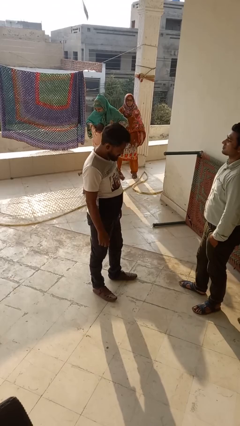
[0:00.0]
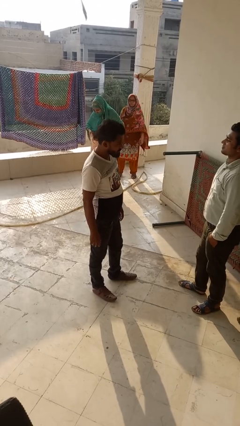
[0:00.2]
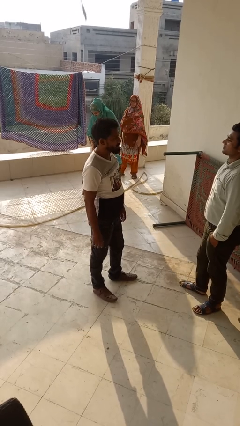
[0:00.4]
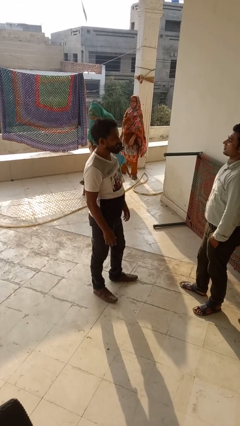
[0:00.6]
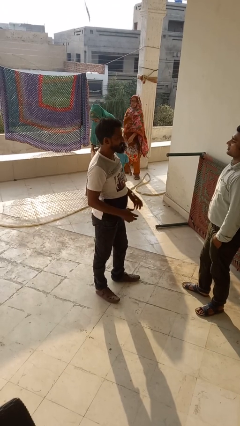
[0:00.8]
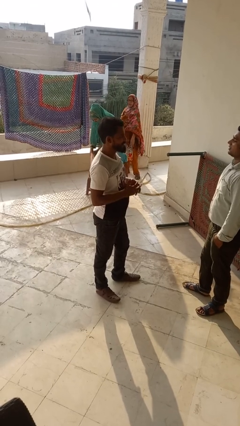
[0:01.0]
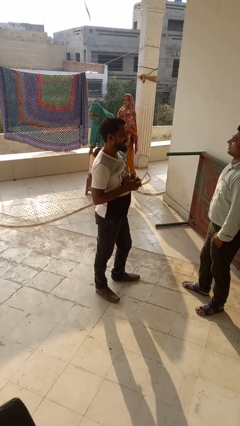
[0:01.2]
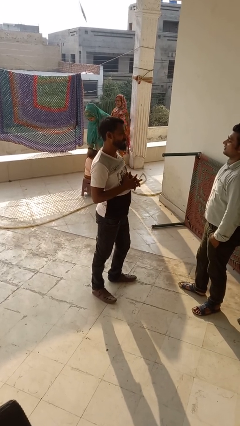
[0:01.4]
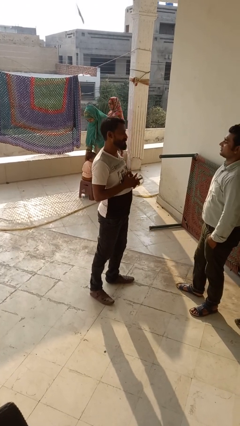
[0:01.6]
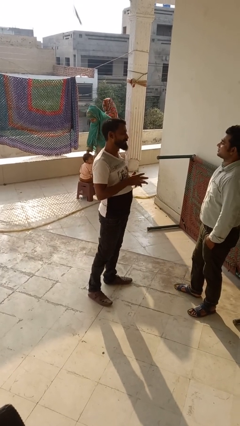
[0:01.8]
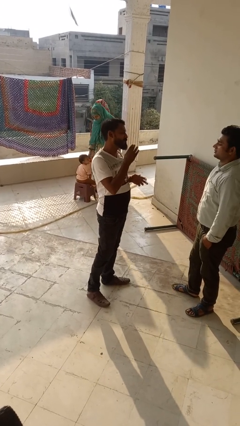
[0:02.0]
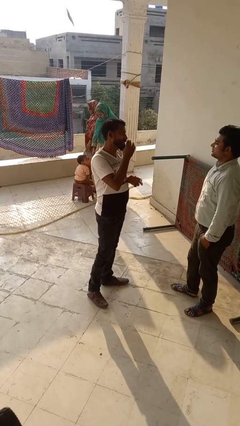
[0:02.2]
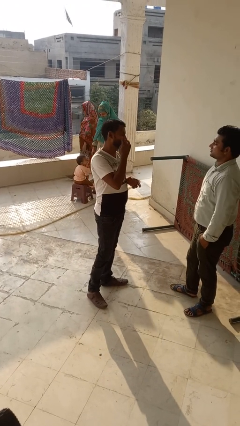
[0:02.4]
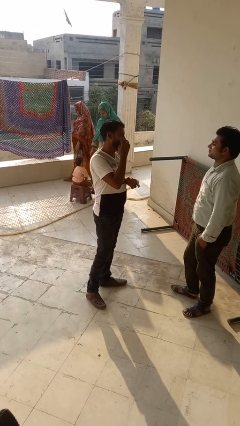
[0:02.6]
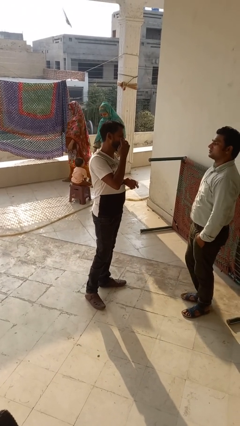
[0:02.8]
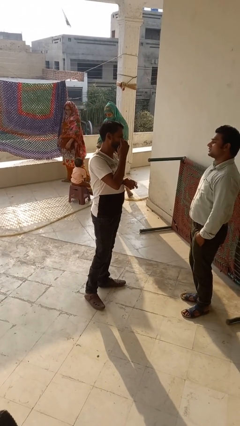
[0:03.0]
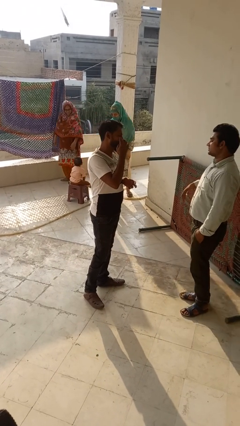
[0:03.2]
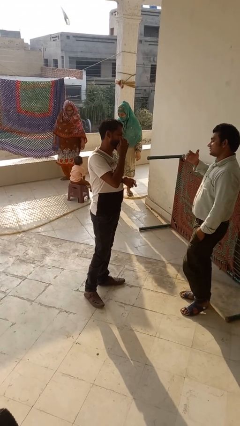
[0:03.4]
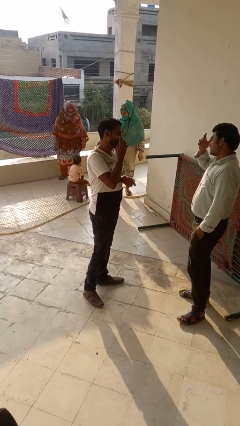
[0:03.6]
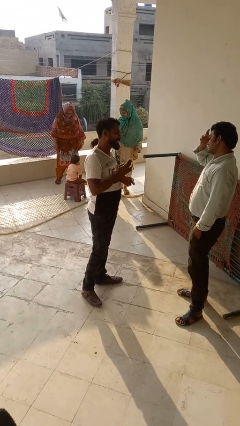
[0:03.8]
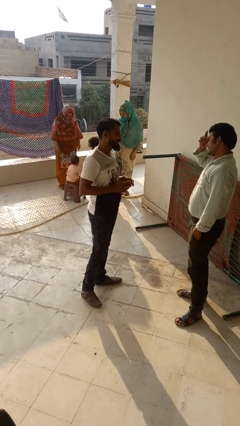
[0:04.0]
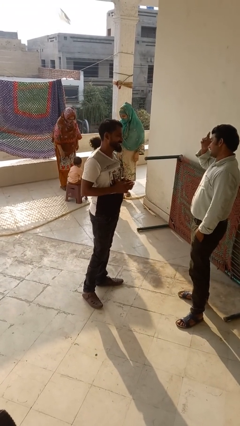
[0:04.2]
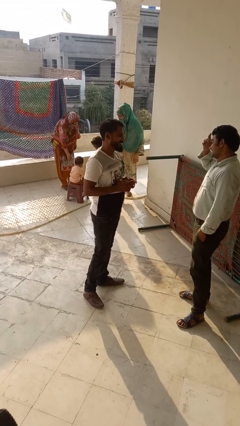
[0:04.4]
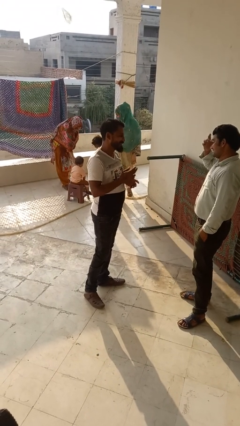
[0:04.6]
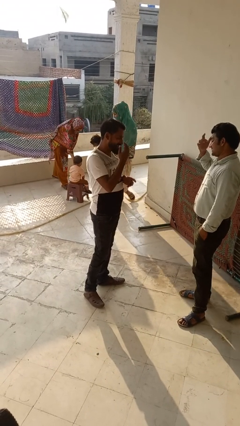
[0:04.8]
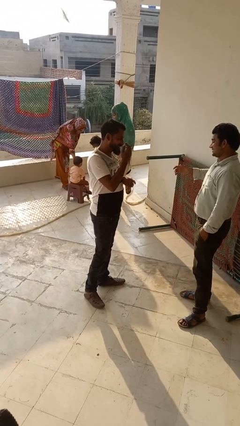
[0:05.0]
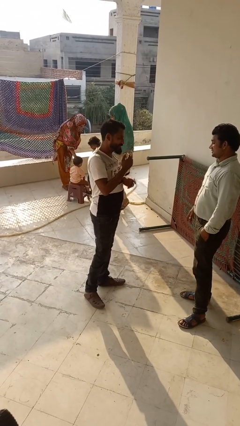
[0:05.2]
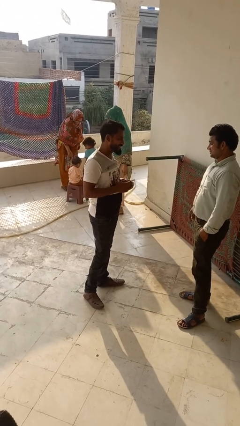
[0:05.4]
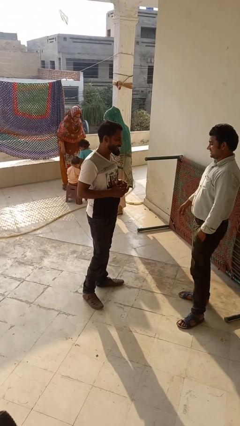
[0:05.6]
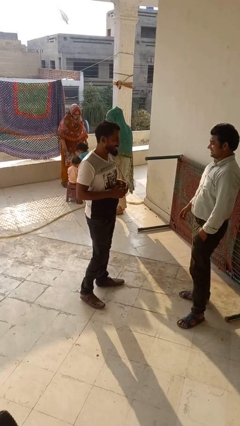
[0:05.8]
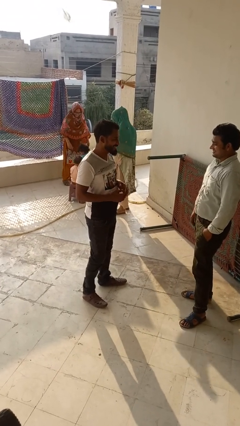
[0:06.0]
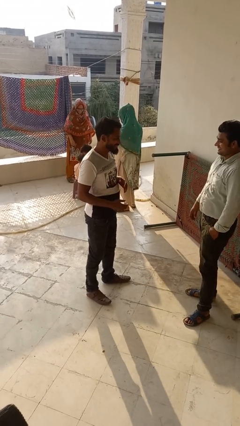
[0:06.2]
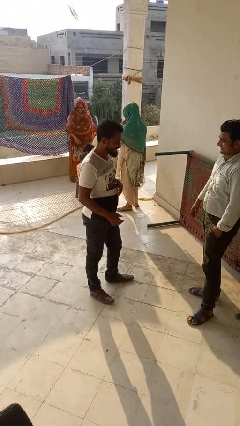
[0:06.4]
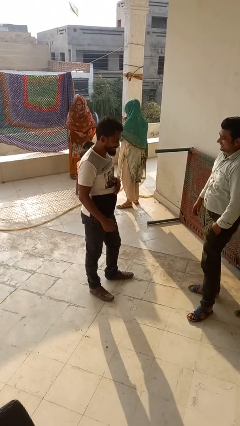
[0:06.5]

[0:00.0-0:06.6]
person talks to person

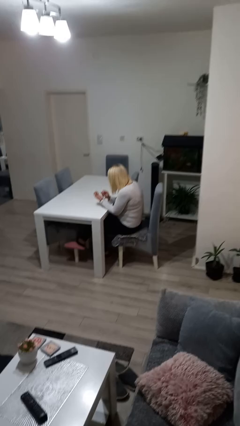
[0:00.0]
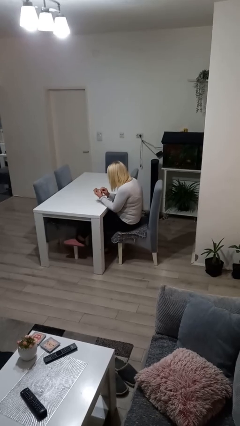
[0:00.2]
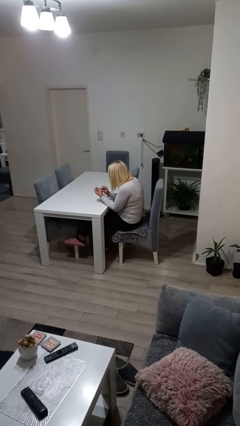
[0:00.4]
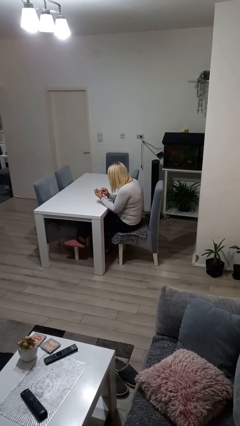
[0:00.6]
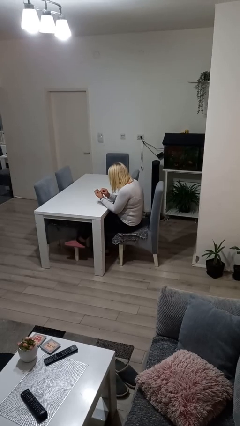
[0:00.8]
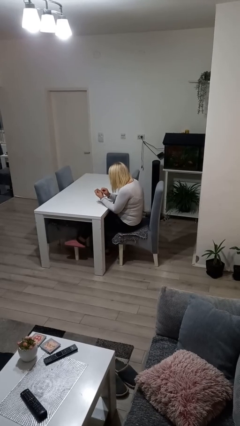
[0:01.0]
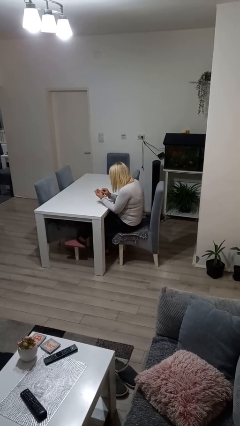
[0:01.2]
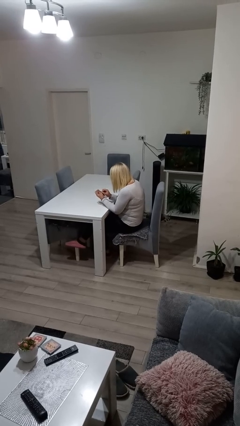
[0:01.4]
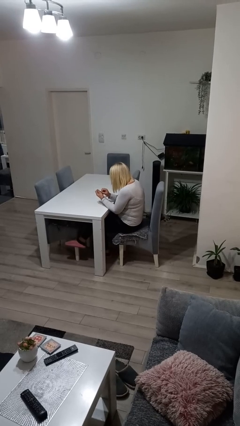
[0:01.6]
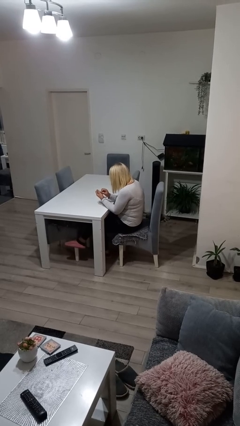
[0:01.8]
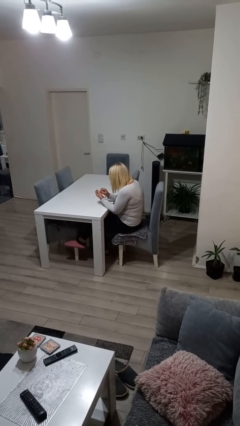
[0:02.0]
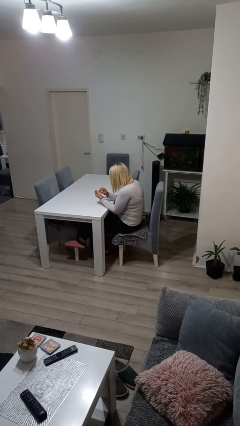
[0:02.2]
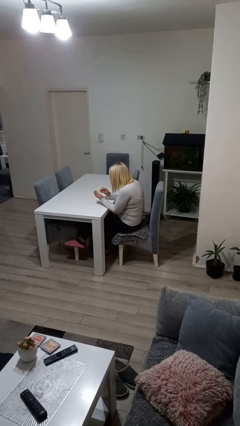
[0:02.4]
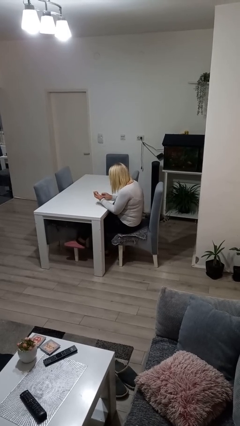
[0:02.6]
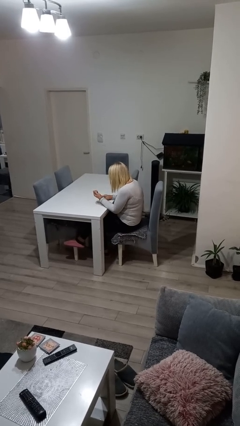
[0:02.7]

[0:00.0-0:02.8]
person files fingernails

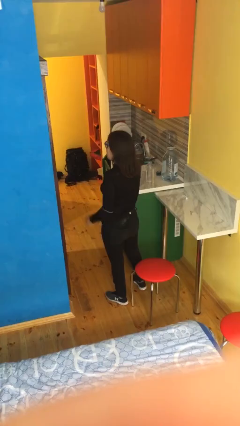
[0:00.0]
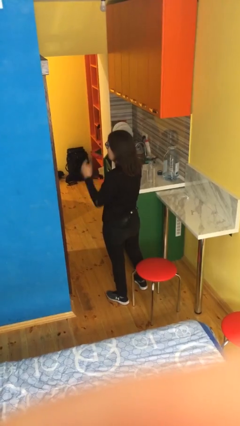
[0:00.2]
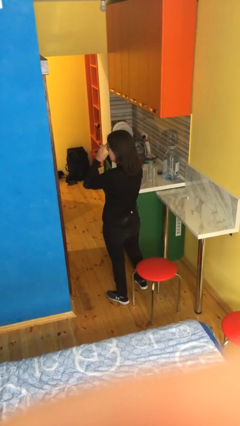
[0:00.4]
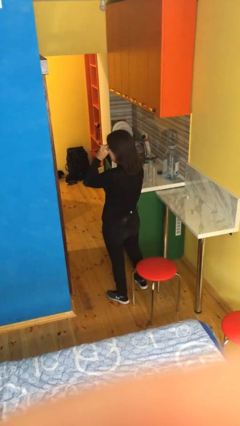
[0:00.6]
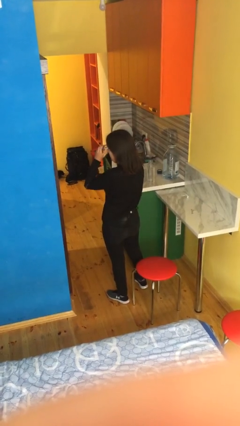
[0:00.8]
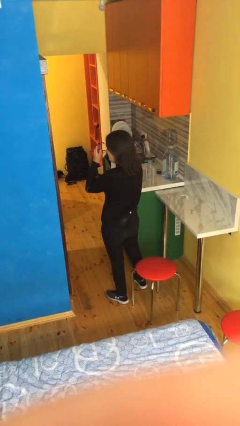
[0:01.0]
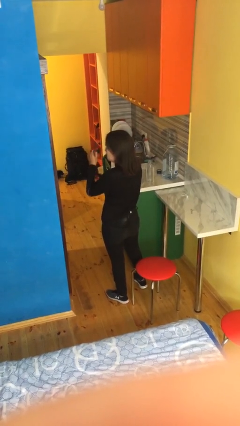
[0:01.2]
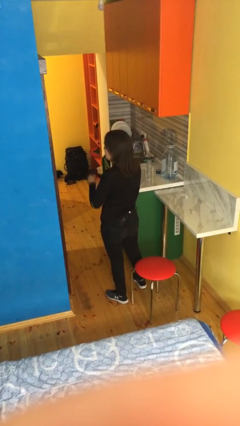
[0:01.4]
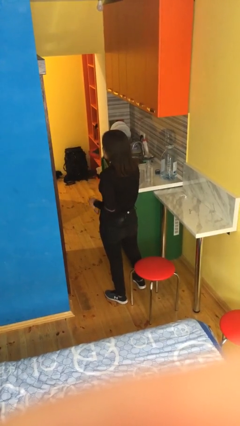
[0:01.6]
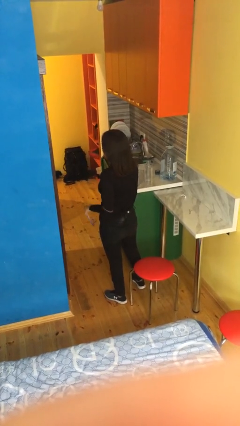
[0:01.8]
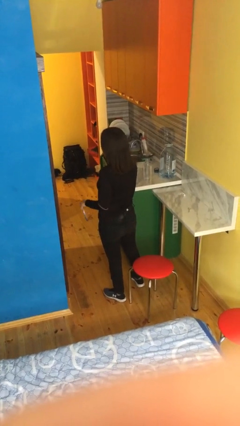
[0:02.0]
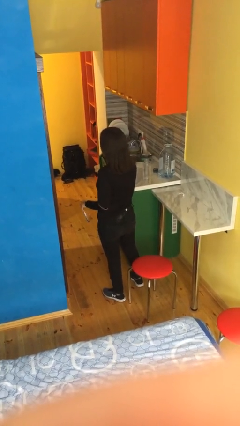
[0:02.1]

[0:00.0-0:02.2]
person takes off glasses

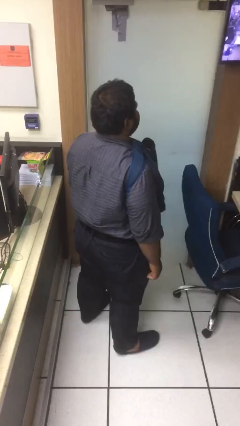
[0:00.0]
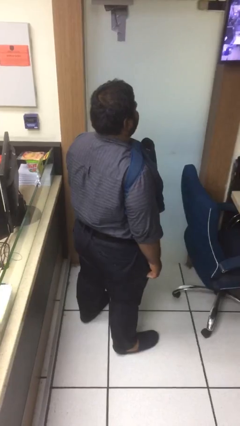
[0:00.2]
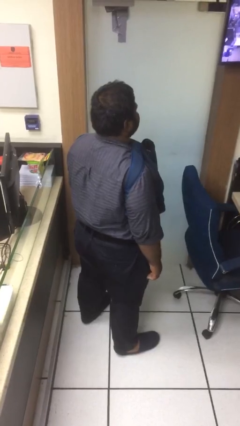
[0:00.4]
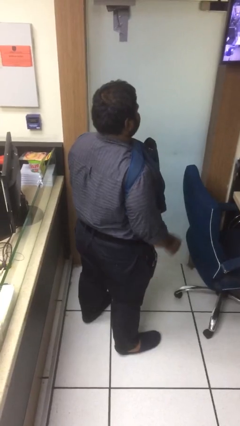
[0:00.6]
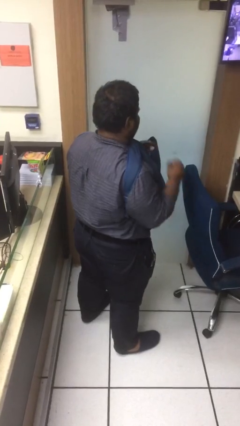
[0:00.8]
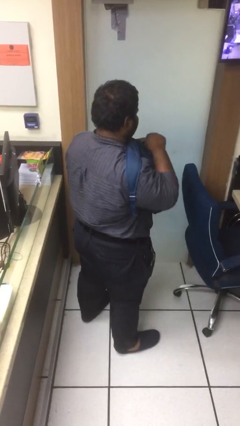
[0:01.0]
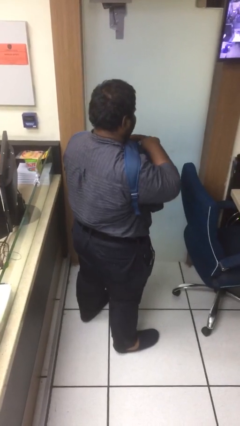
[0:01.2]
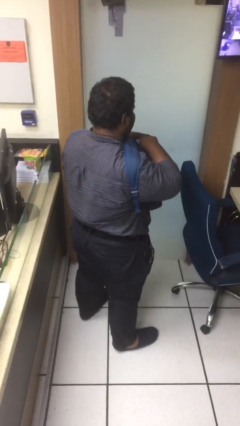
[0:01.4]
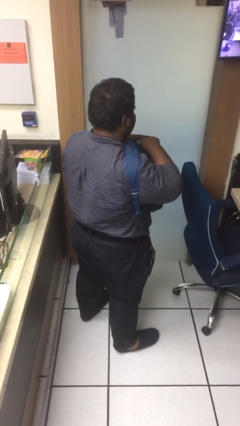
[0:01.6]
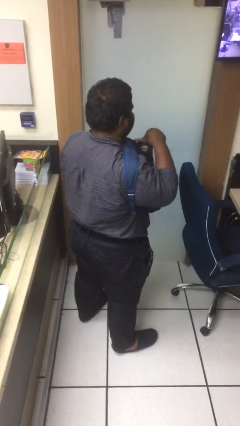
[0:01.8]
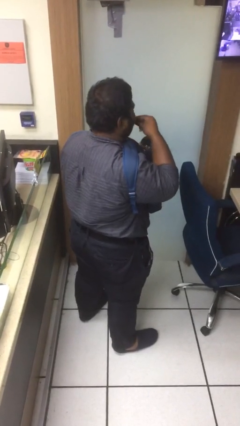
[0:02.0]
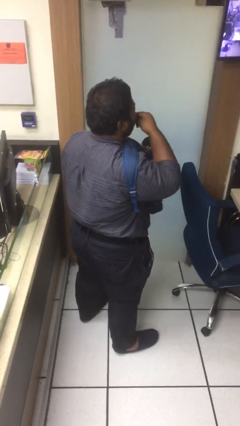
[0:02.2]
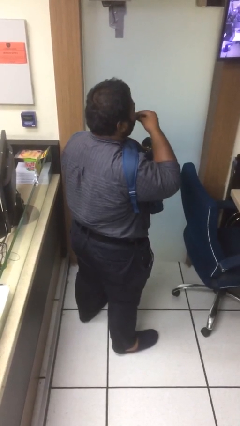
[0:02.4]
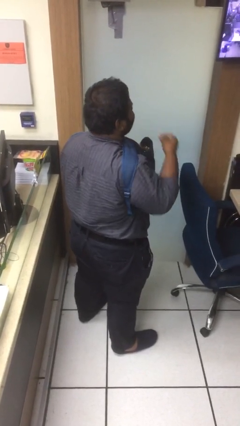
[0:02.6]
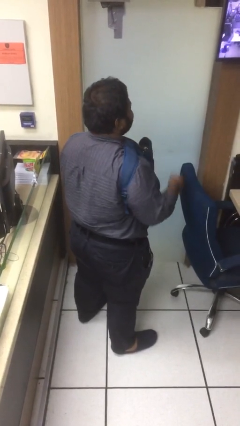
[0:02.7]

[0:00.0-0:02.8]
person eats snack from bag

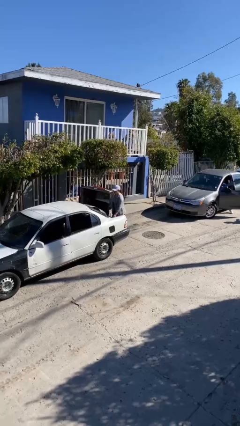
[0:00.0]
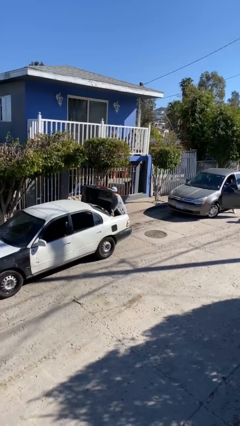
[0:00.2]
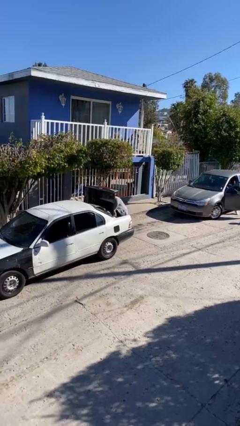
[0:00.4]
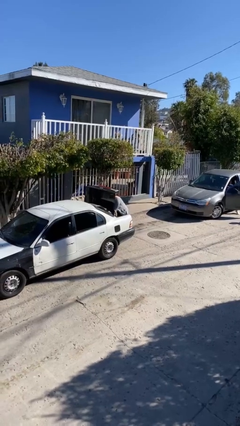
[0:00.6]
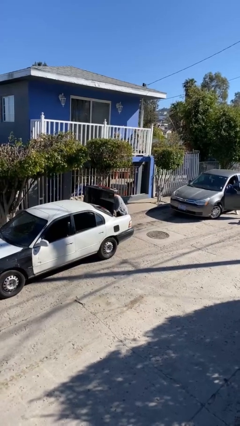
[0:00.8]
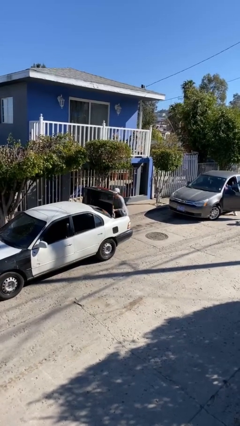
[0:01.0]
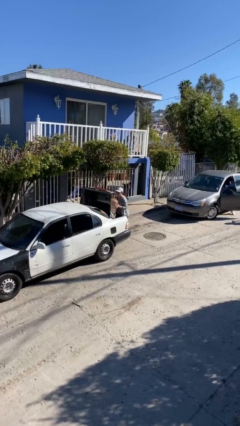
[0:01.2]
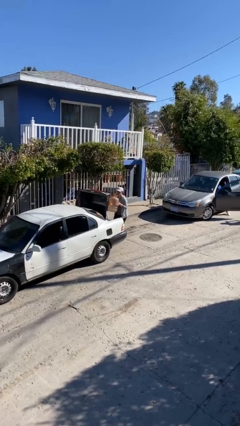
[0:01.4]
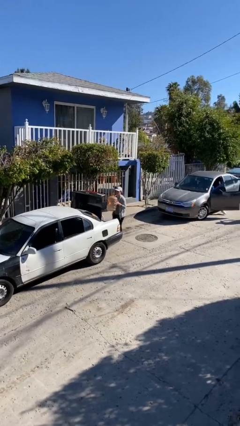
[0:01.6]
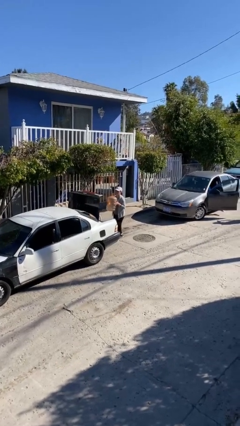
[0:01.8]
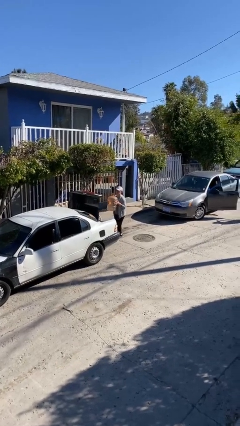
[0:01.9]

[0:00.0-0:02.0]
person unloads car

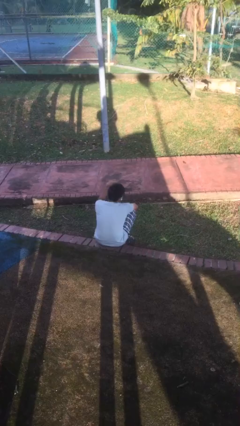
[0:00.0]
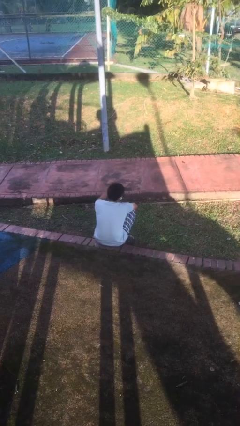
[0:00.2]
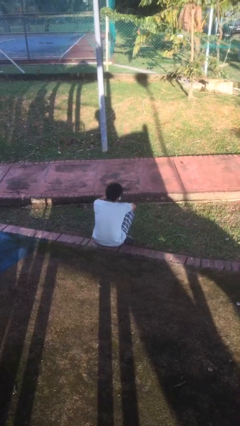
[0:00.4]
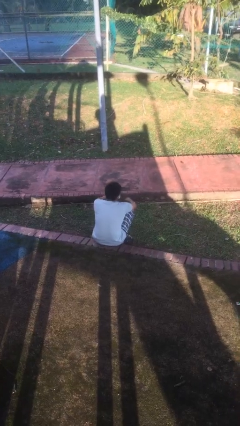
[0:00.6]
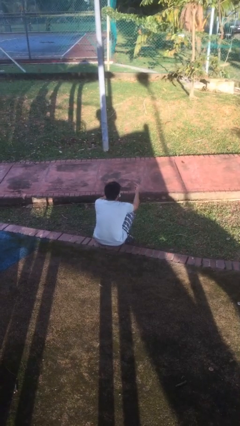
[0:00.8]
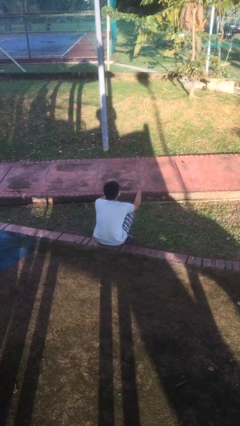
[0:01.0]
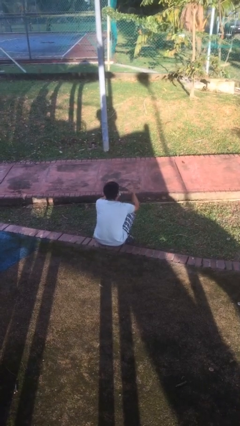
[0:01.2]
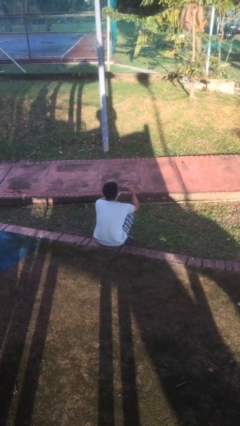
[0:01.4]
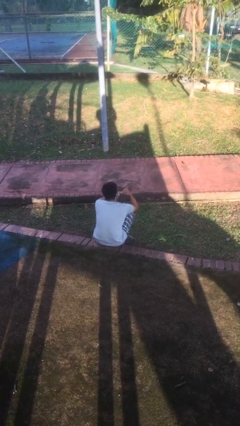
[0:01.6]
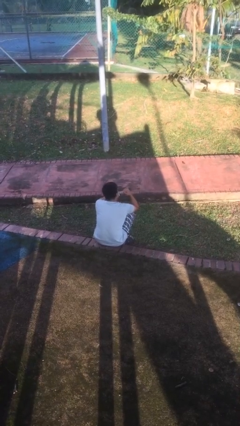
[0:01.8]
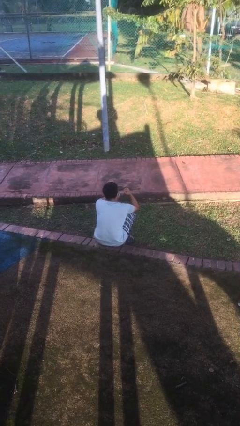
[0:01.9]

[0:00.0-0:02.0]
person gestures listen closely
